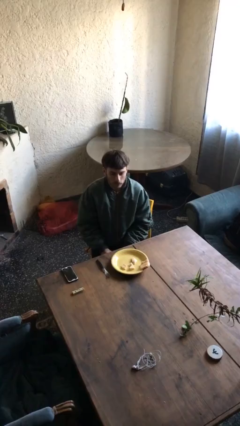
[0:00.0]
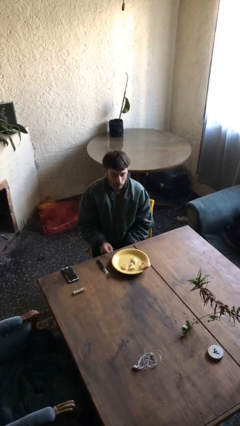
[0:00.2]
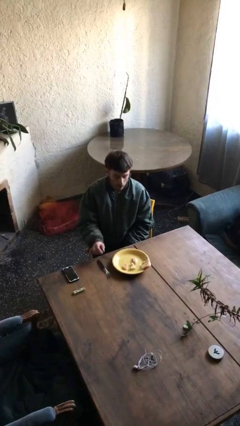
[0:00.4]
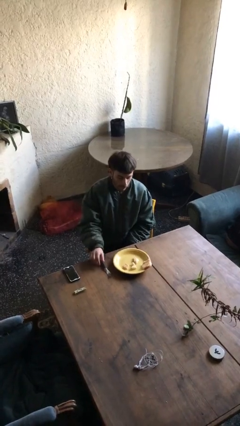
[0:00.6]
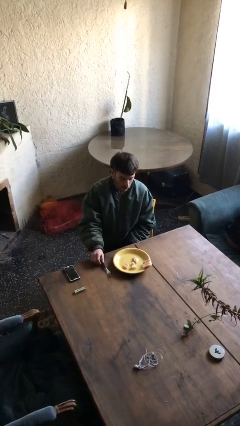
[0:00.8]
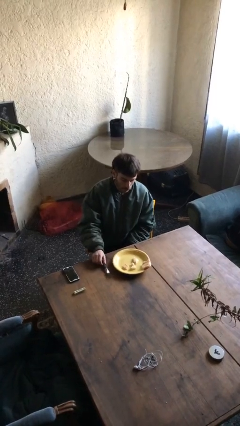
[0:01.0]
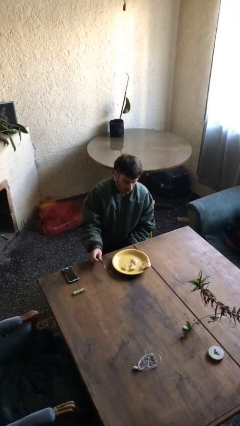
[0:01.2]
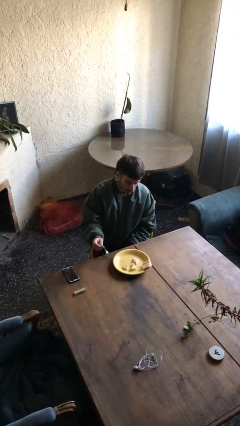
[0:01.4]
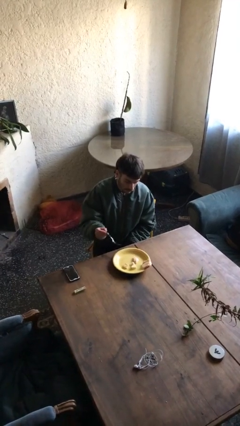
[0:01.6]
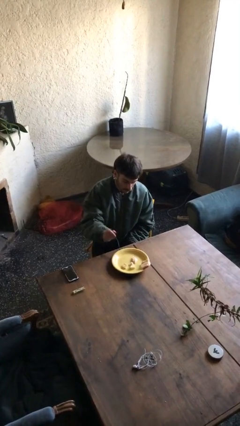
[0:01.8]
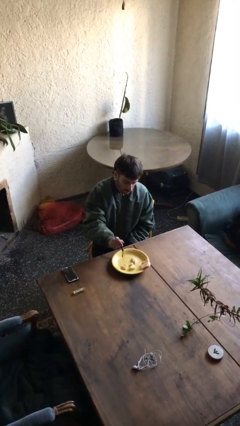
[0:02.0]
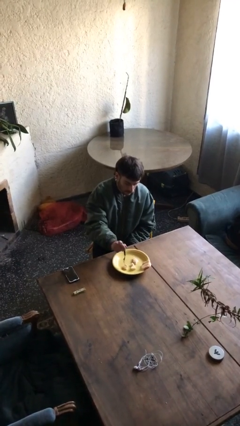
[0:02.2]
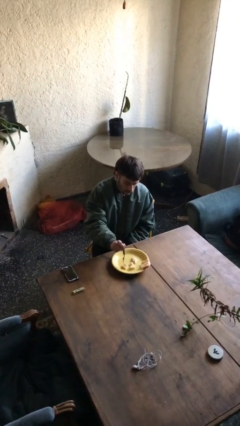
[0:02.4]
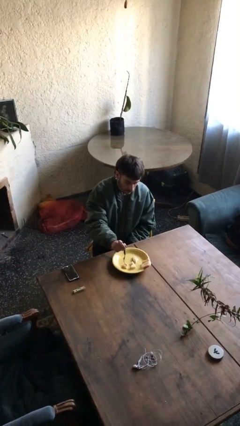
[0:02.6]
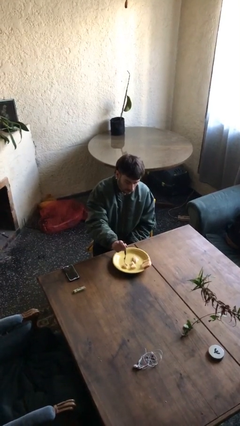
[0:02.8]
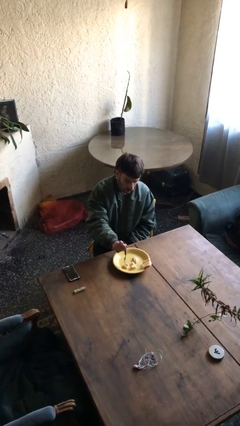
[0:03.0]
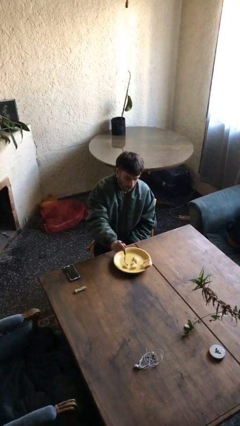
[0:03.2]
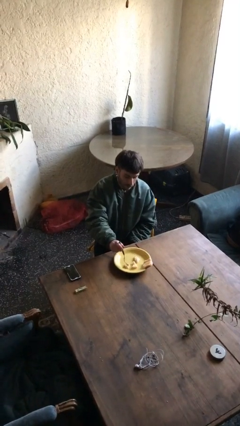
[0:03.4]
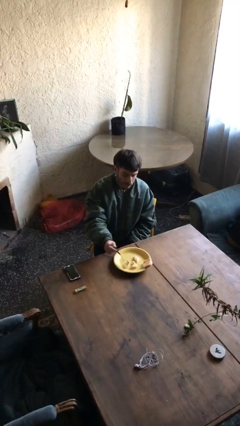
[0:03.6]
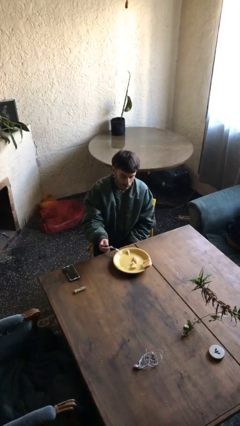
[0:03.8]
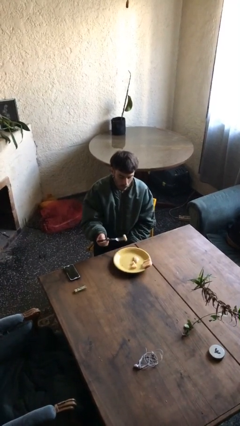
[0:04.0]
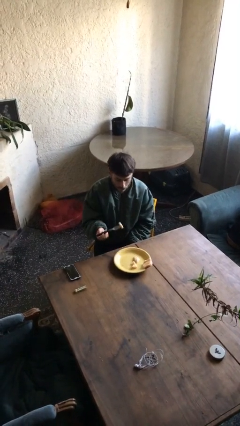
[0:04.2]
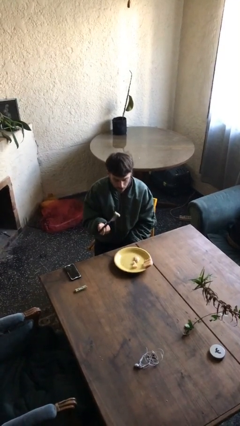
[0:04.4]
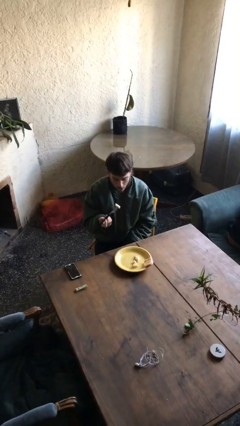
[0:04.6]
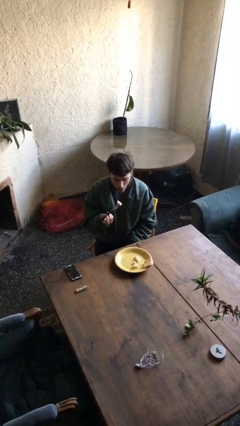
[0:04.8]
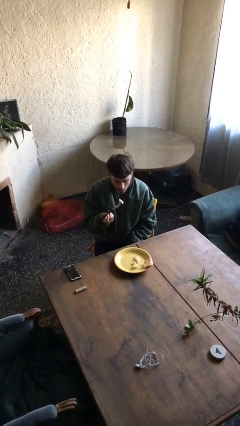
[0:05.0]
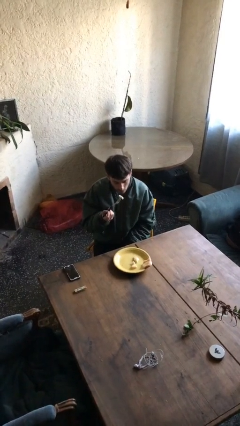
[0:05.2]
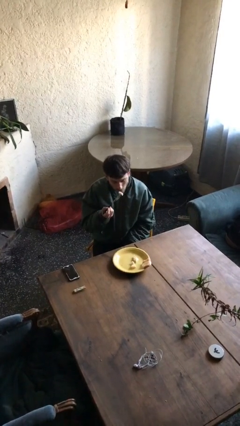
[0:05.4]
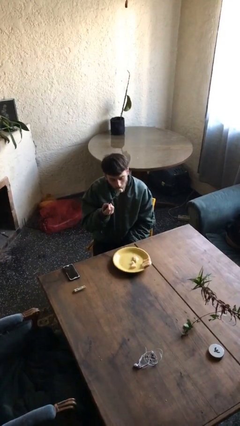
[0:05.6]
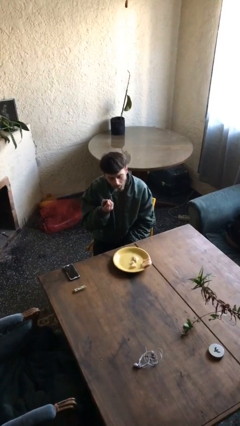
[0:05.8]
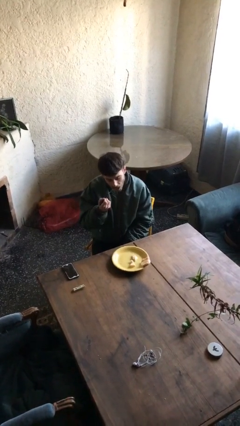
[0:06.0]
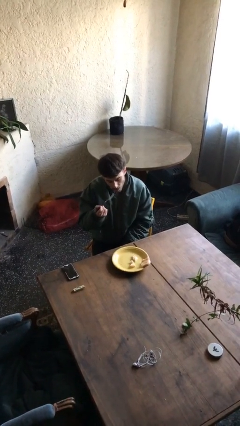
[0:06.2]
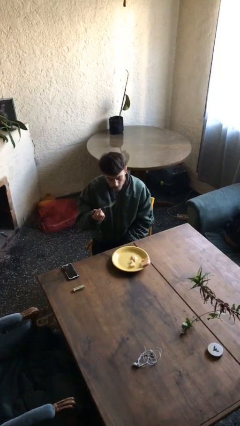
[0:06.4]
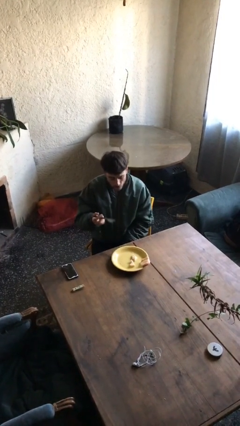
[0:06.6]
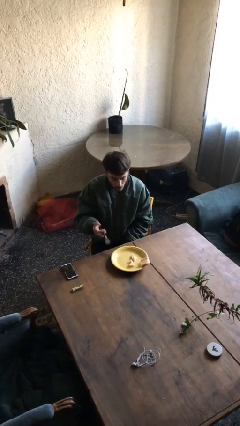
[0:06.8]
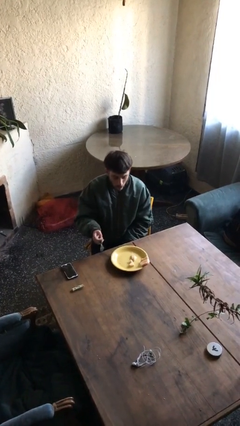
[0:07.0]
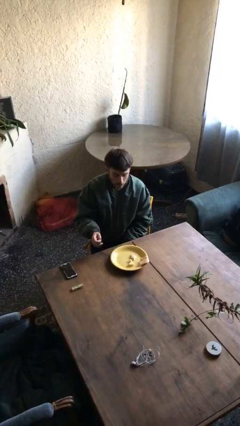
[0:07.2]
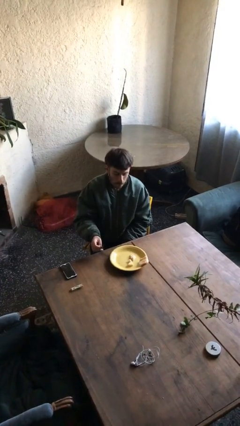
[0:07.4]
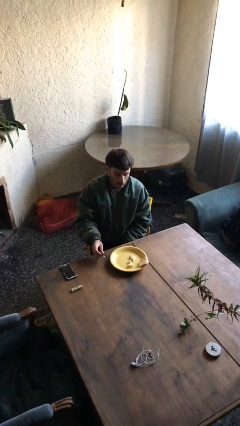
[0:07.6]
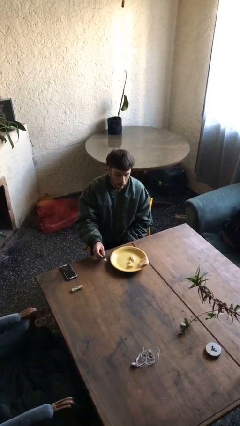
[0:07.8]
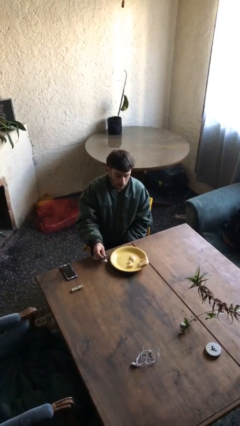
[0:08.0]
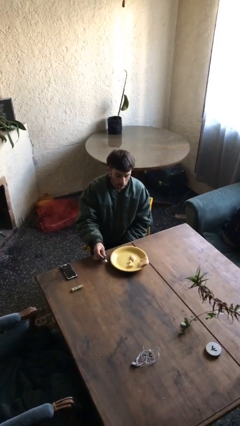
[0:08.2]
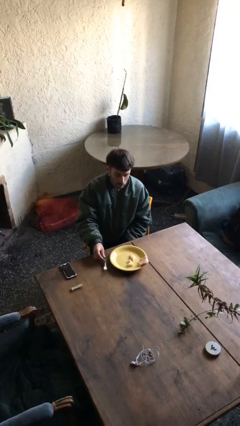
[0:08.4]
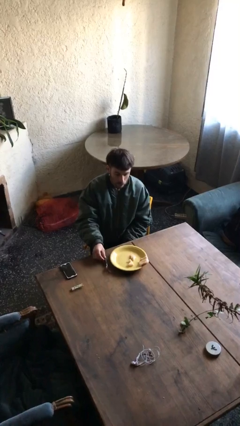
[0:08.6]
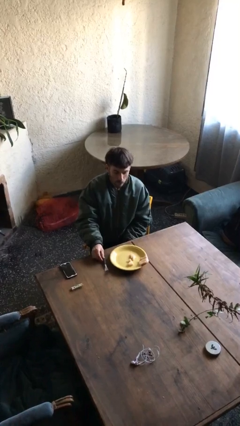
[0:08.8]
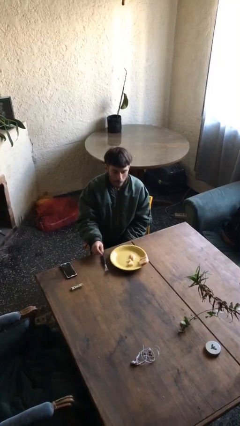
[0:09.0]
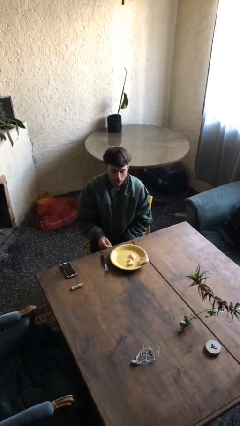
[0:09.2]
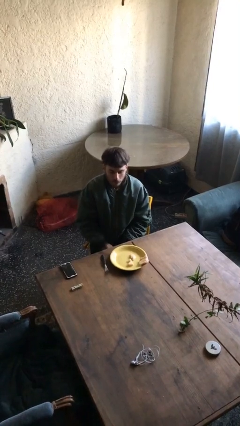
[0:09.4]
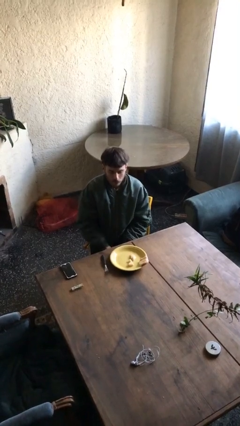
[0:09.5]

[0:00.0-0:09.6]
person eats with utensil

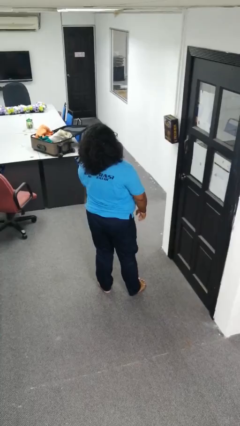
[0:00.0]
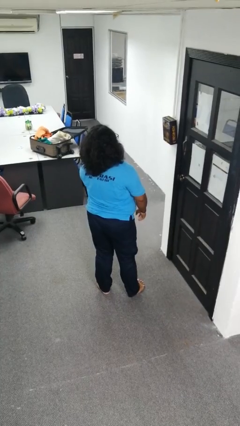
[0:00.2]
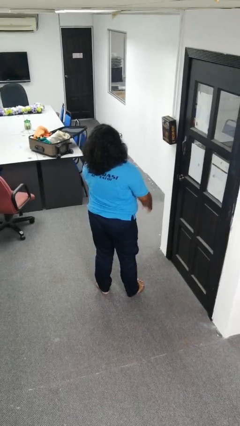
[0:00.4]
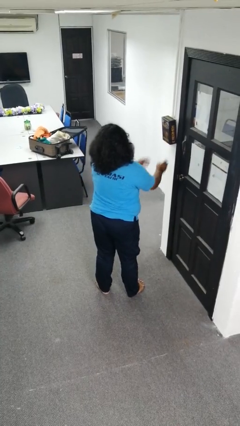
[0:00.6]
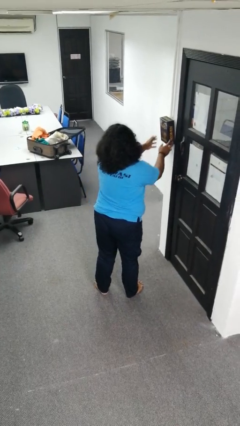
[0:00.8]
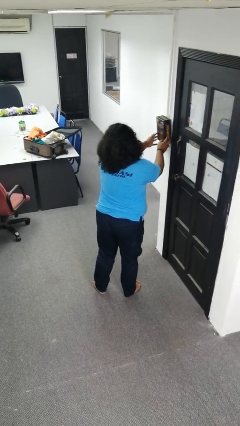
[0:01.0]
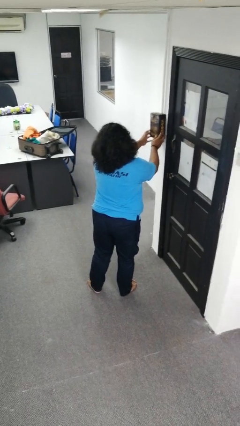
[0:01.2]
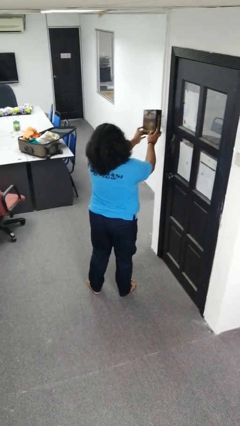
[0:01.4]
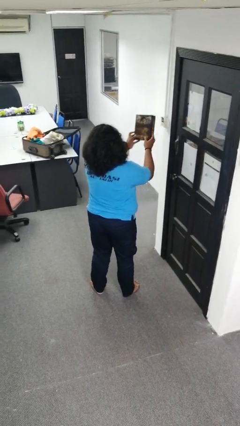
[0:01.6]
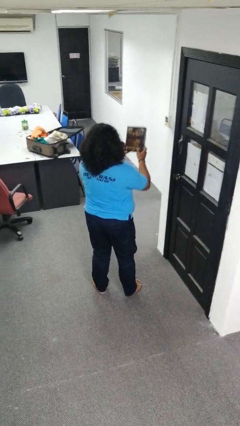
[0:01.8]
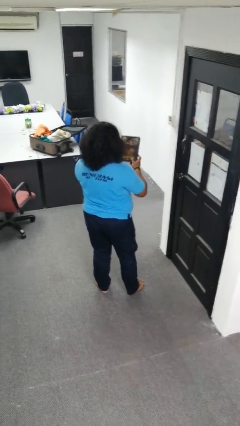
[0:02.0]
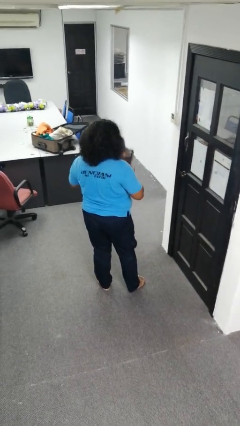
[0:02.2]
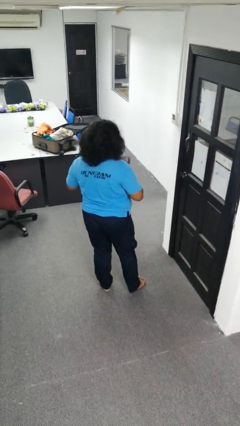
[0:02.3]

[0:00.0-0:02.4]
person takes down picture frame

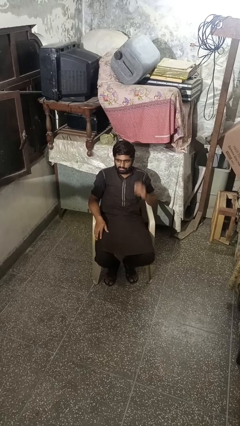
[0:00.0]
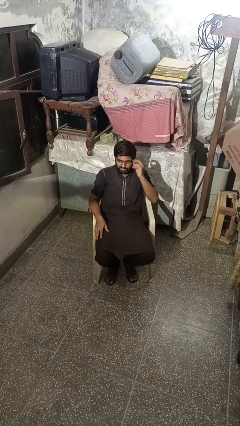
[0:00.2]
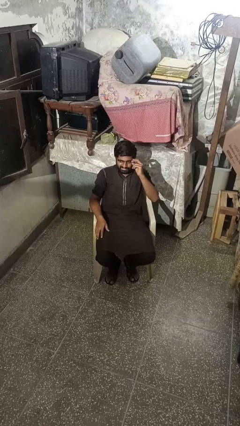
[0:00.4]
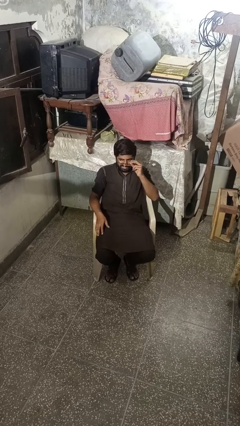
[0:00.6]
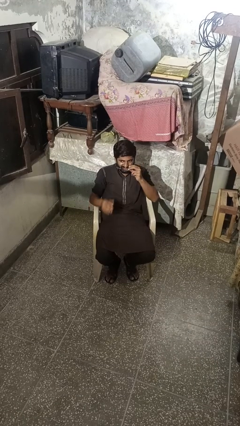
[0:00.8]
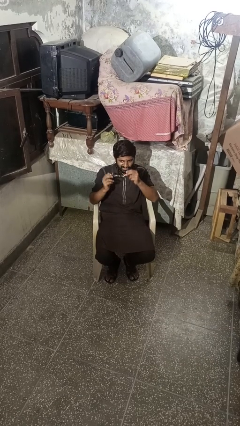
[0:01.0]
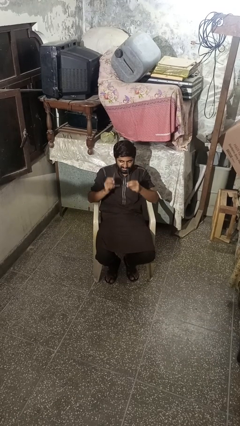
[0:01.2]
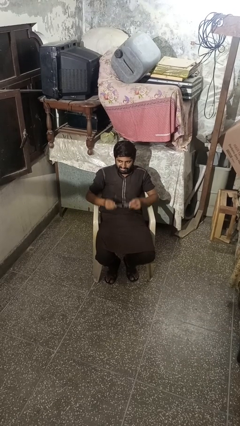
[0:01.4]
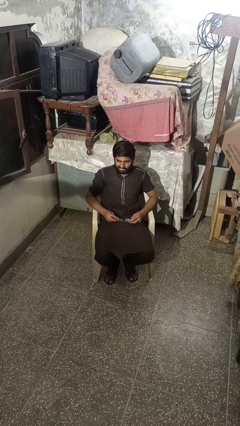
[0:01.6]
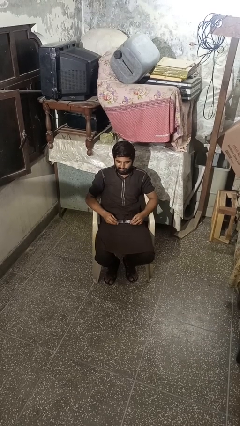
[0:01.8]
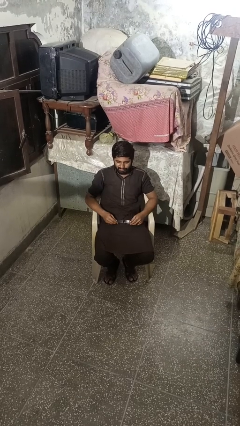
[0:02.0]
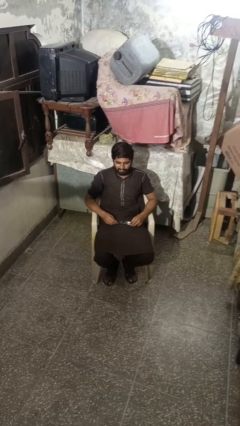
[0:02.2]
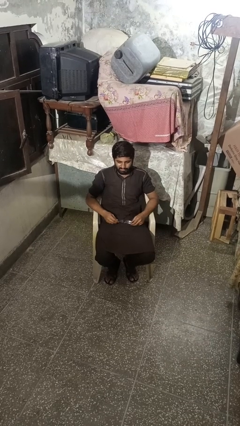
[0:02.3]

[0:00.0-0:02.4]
person takes off glasses

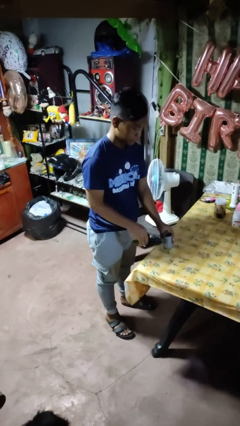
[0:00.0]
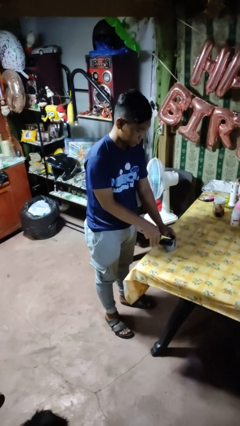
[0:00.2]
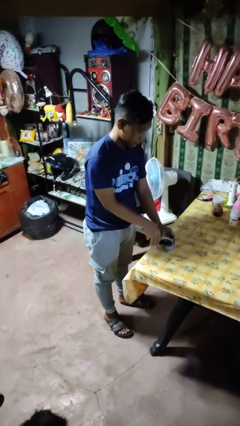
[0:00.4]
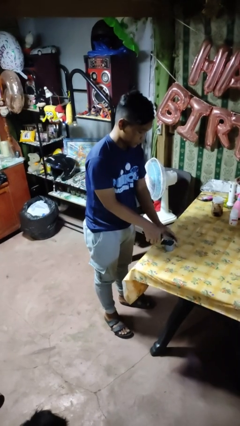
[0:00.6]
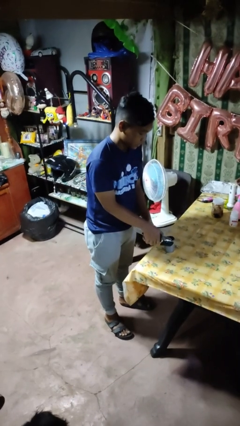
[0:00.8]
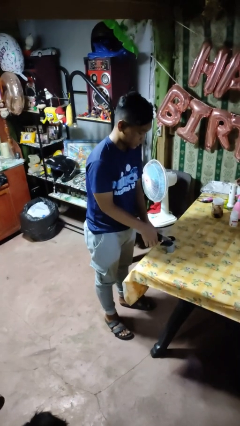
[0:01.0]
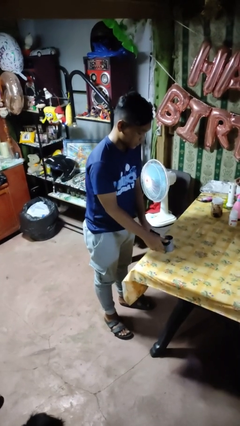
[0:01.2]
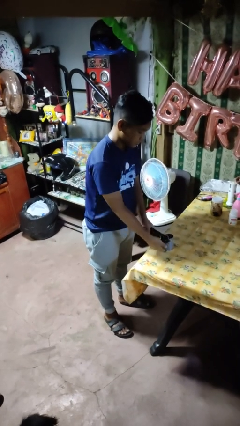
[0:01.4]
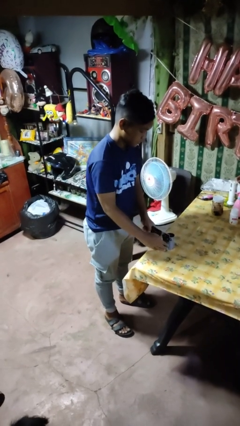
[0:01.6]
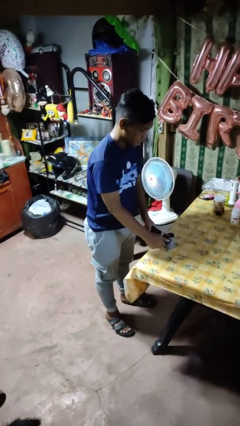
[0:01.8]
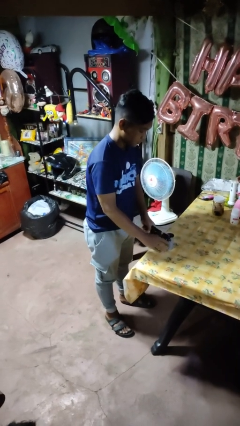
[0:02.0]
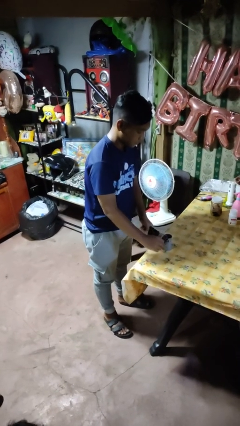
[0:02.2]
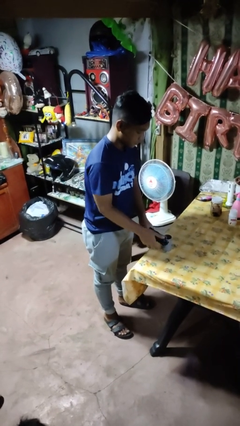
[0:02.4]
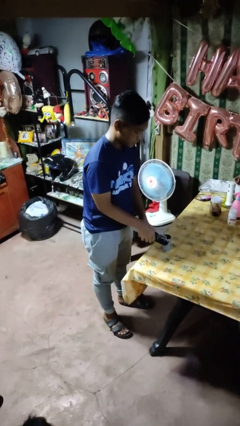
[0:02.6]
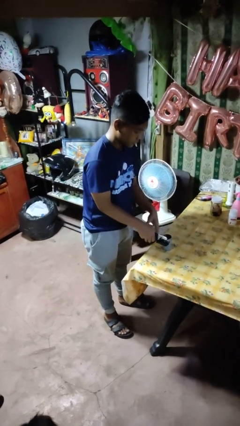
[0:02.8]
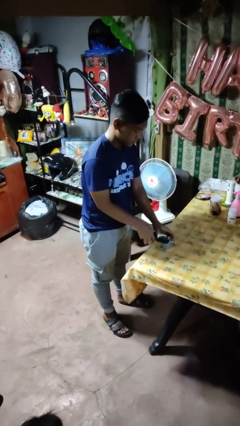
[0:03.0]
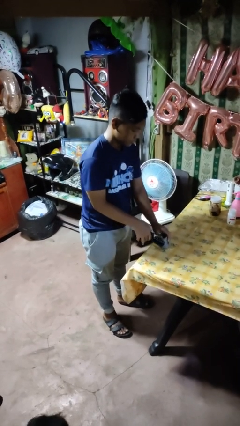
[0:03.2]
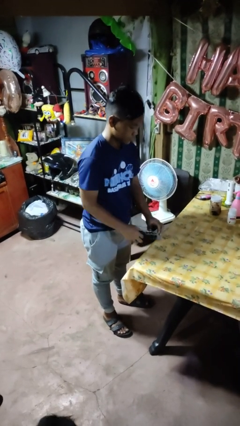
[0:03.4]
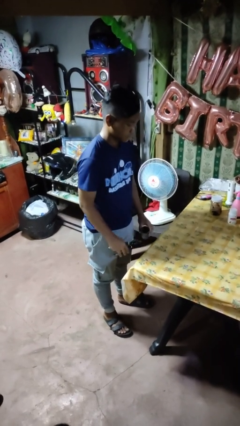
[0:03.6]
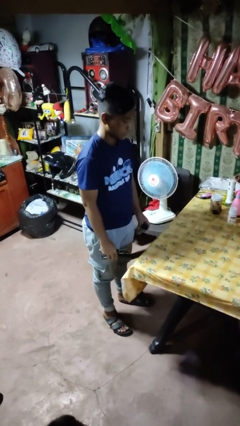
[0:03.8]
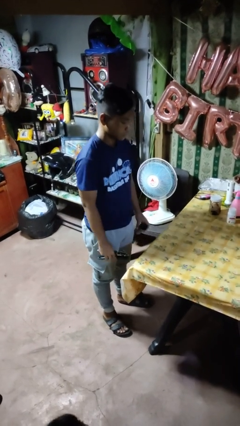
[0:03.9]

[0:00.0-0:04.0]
person opens can with can opener
